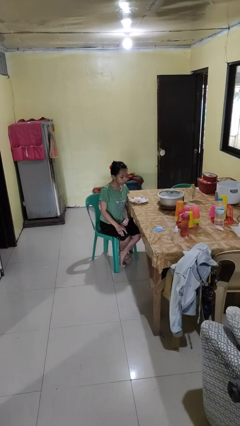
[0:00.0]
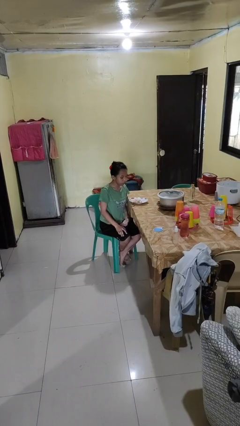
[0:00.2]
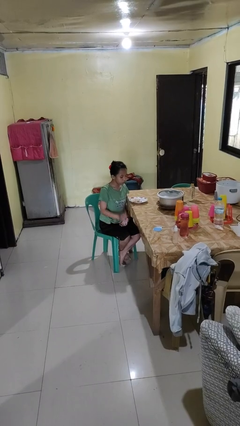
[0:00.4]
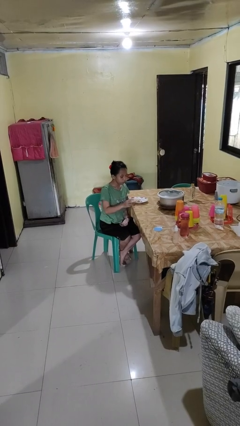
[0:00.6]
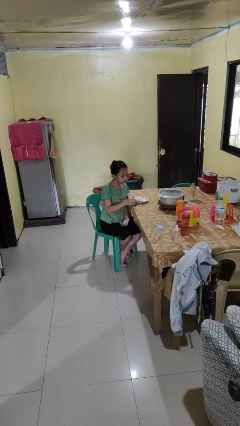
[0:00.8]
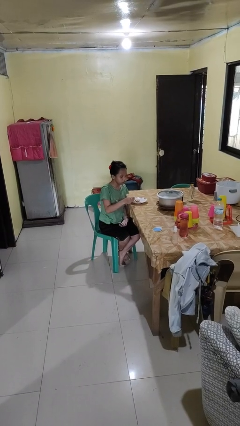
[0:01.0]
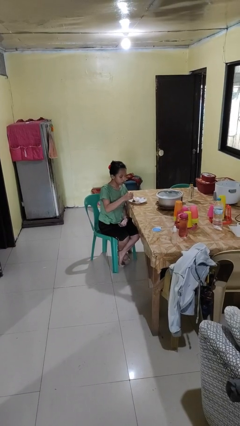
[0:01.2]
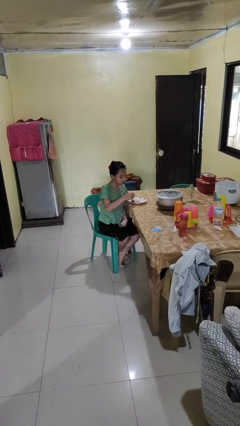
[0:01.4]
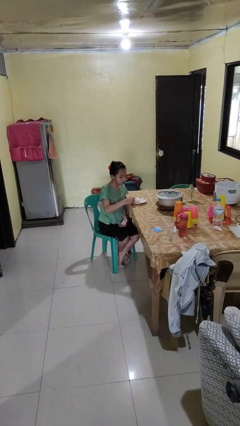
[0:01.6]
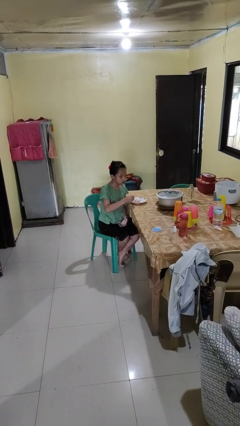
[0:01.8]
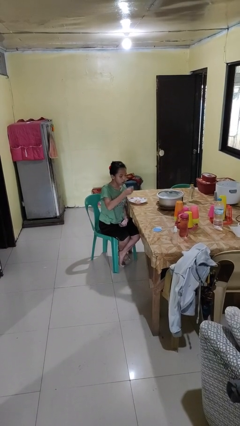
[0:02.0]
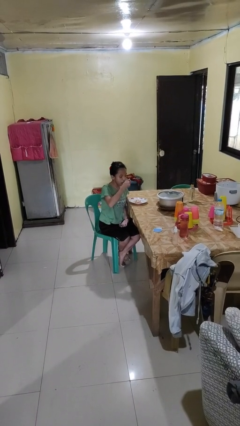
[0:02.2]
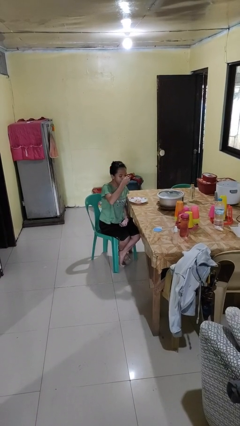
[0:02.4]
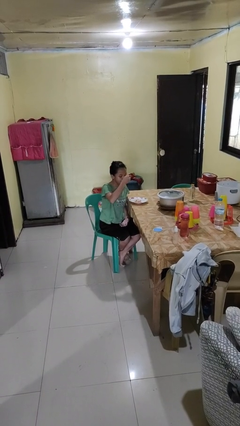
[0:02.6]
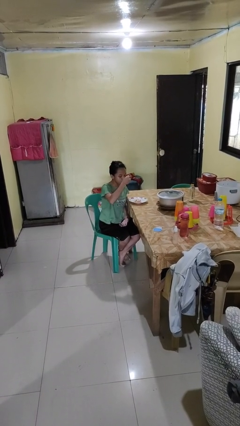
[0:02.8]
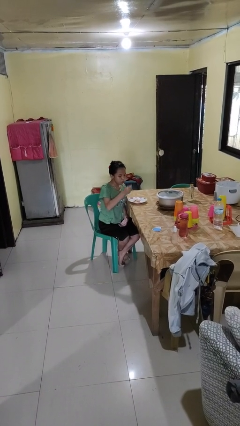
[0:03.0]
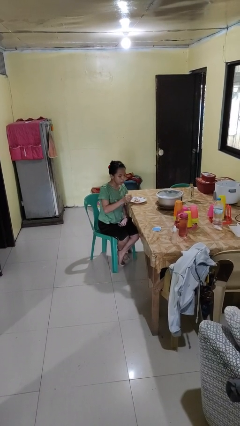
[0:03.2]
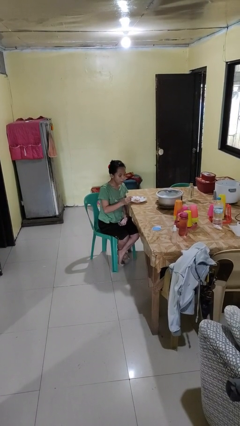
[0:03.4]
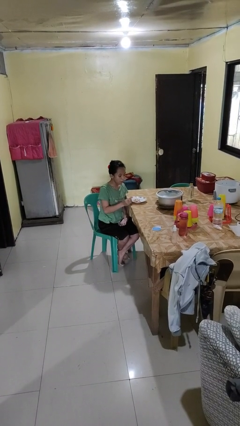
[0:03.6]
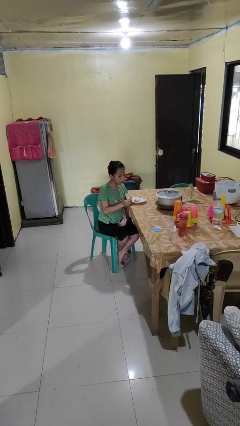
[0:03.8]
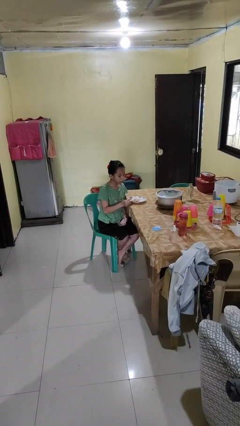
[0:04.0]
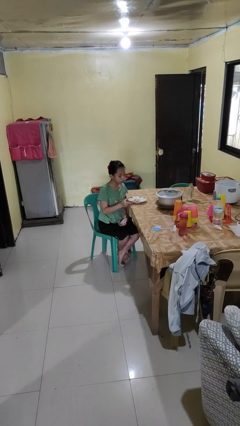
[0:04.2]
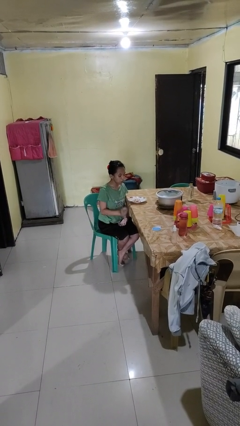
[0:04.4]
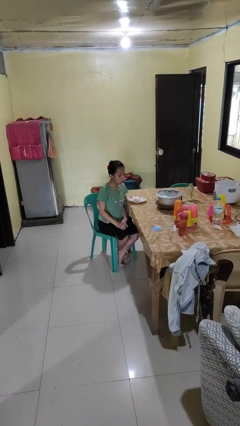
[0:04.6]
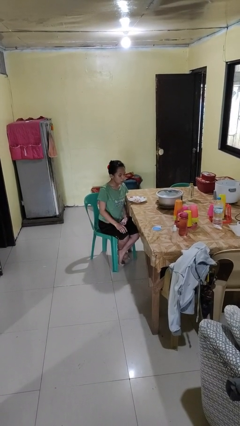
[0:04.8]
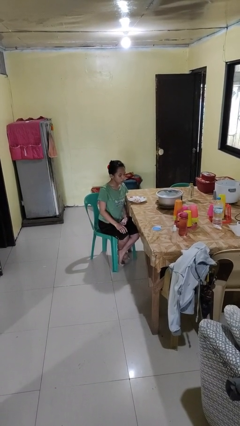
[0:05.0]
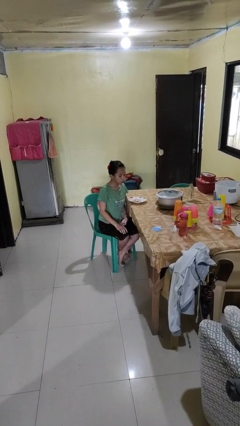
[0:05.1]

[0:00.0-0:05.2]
person eats with utensil

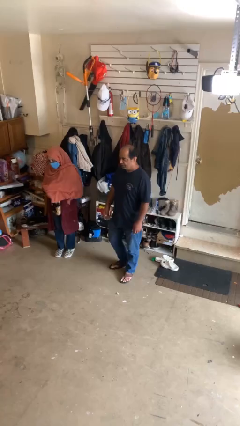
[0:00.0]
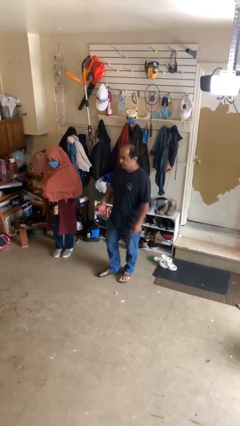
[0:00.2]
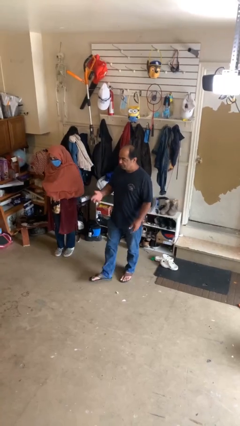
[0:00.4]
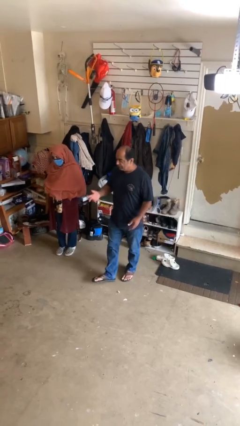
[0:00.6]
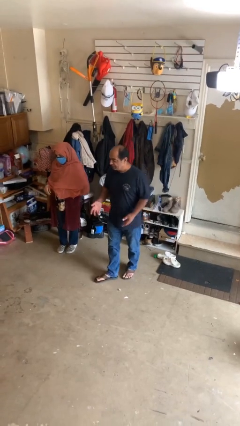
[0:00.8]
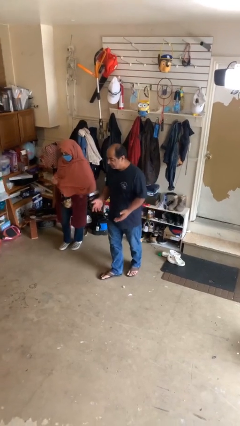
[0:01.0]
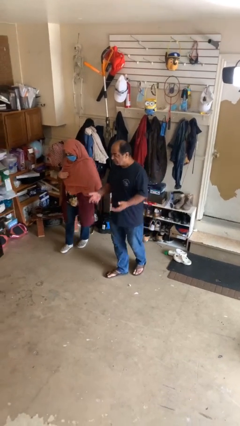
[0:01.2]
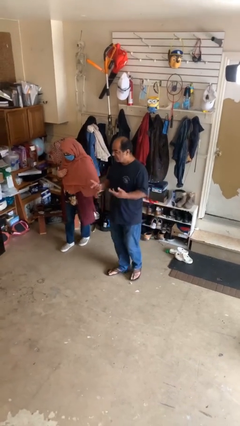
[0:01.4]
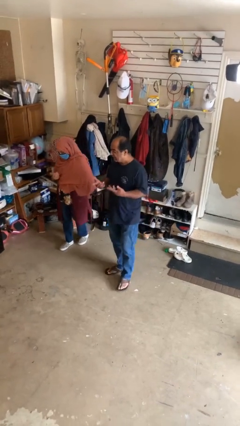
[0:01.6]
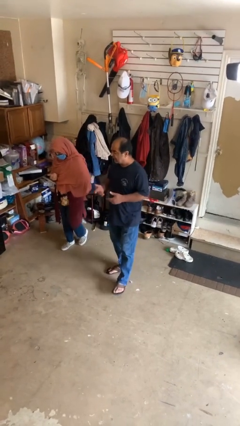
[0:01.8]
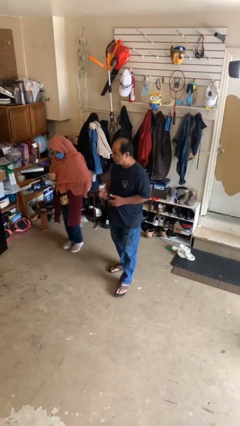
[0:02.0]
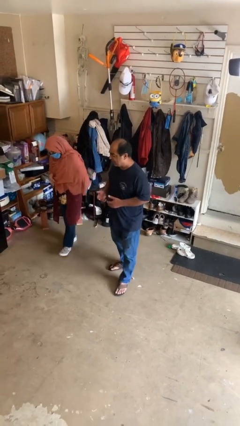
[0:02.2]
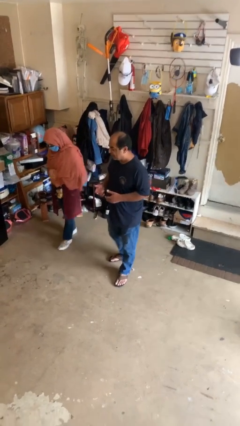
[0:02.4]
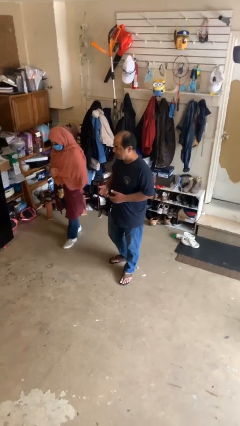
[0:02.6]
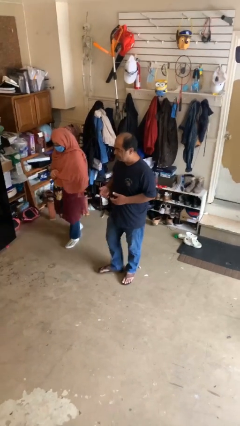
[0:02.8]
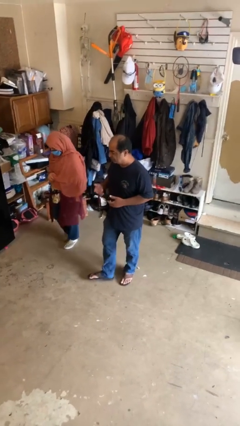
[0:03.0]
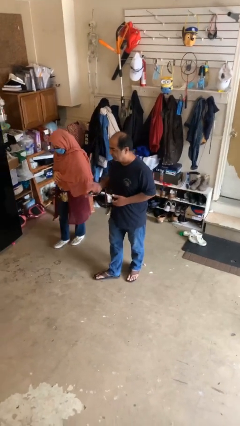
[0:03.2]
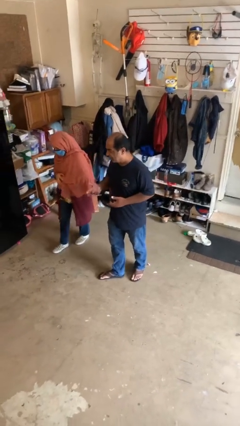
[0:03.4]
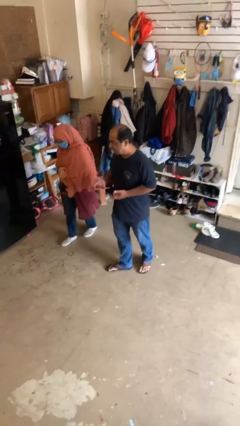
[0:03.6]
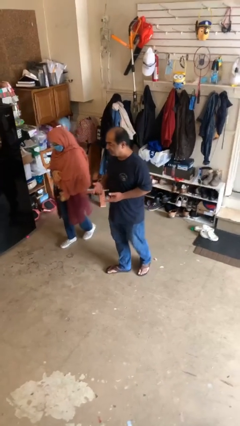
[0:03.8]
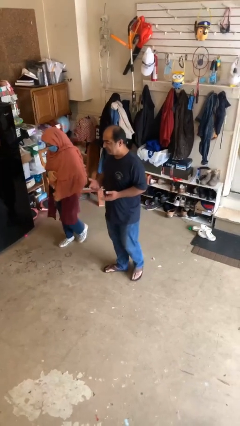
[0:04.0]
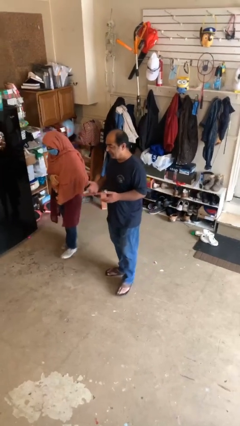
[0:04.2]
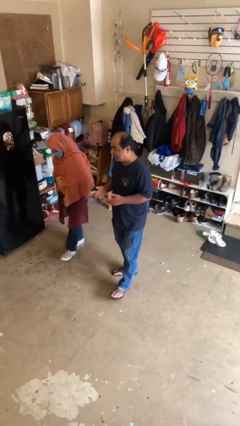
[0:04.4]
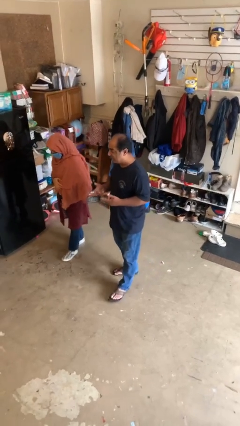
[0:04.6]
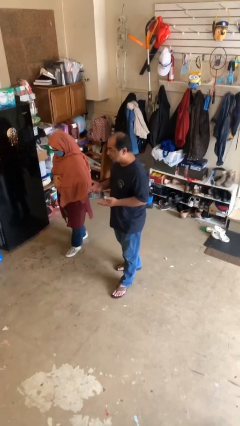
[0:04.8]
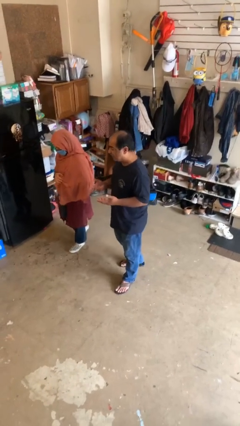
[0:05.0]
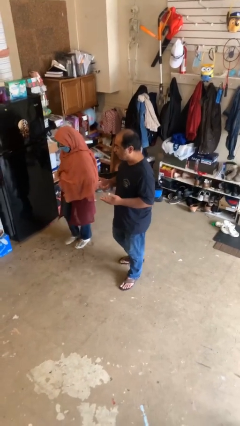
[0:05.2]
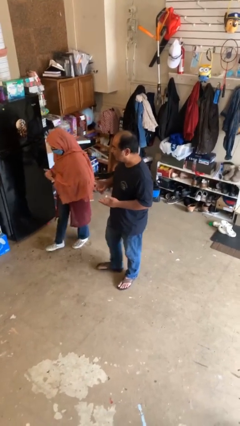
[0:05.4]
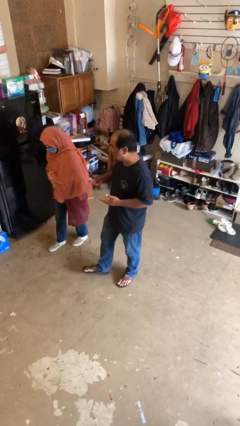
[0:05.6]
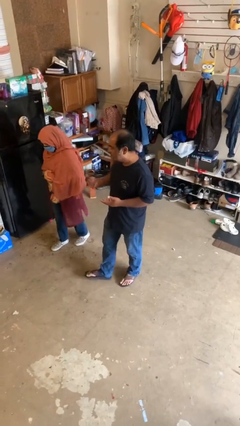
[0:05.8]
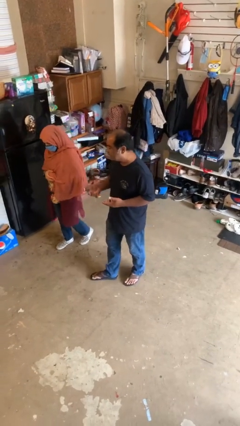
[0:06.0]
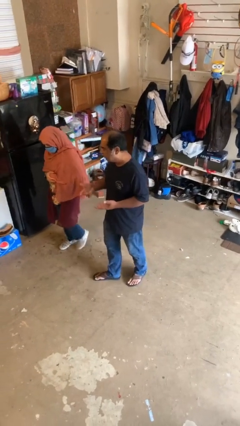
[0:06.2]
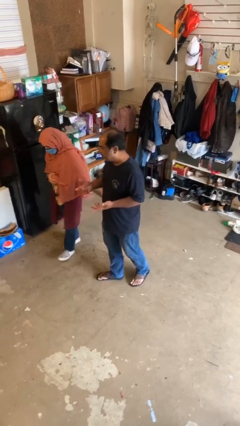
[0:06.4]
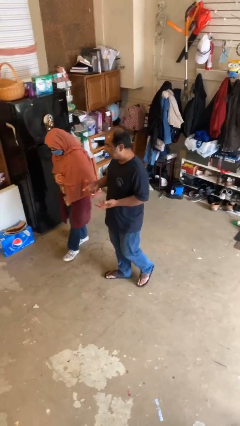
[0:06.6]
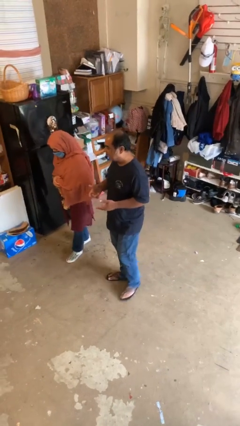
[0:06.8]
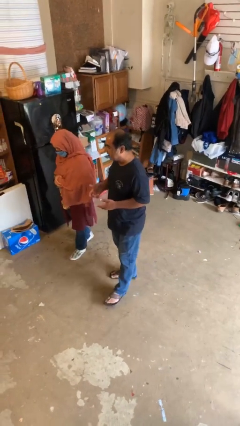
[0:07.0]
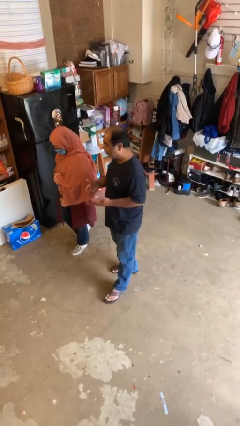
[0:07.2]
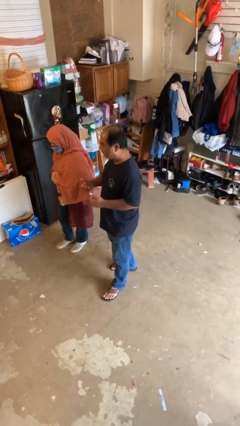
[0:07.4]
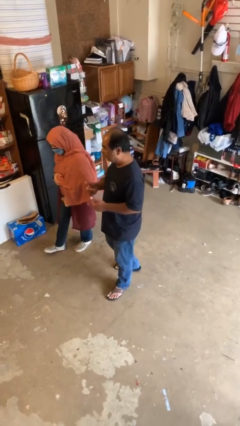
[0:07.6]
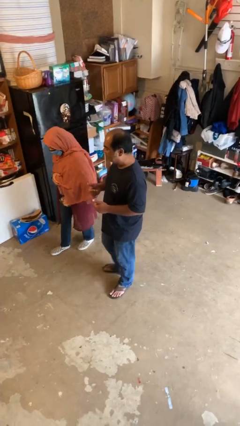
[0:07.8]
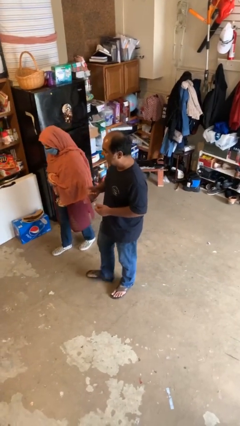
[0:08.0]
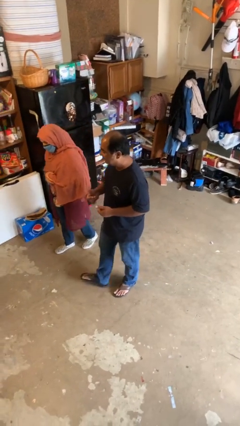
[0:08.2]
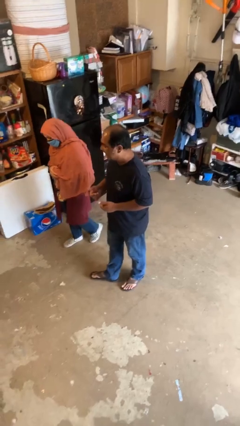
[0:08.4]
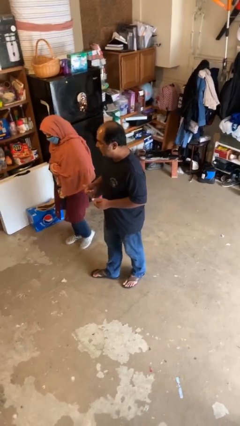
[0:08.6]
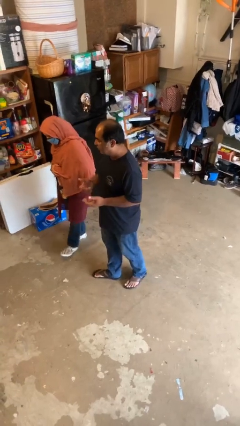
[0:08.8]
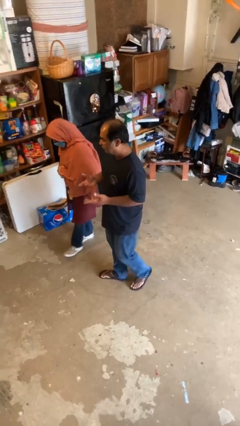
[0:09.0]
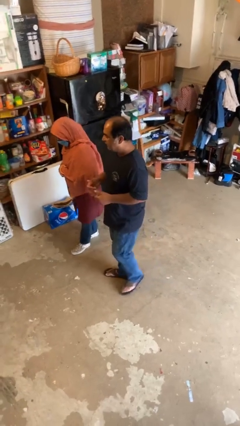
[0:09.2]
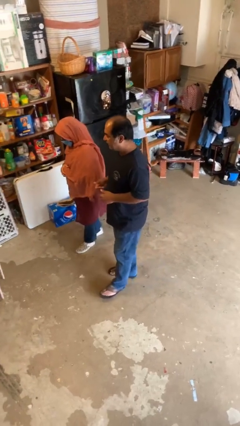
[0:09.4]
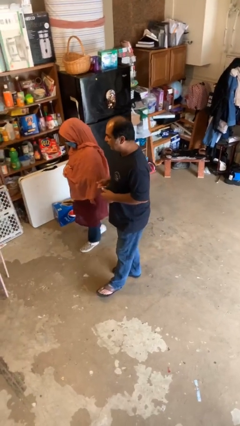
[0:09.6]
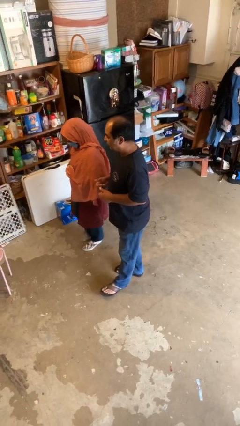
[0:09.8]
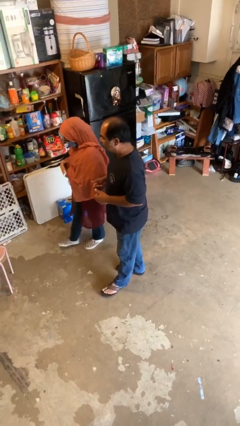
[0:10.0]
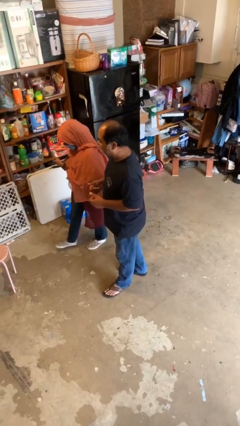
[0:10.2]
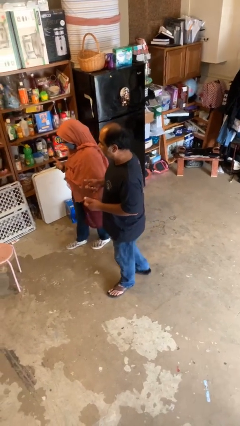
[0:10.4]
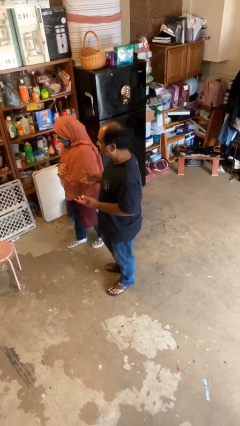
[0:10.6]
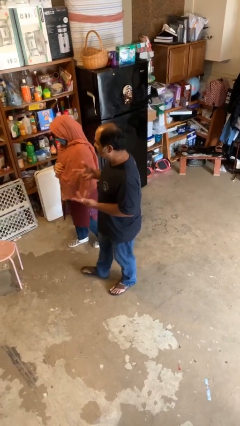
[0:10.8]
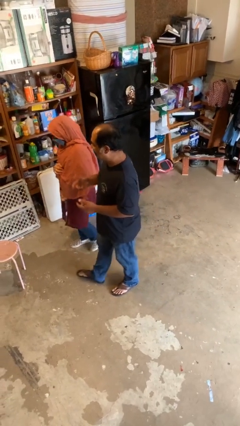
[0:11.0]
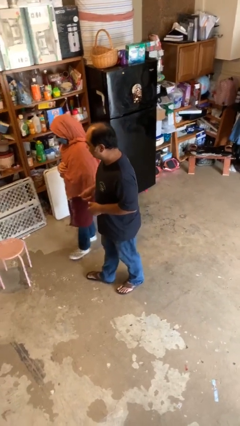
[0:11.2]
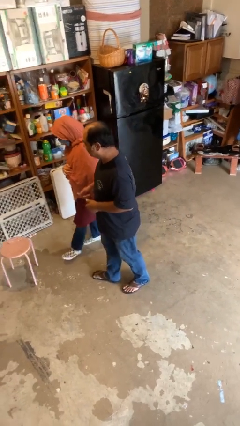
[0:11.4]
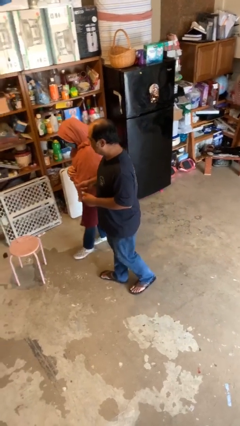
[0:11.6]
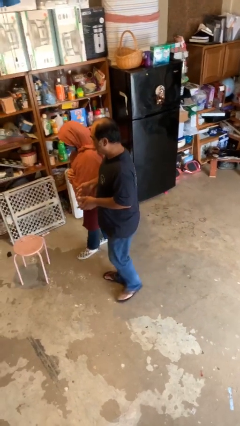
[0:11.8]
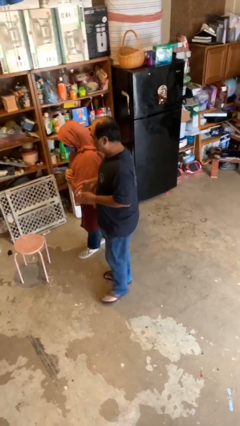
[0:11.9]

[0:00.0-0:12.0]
person talks to person

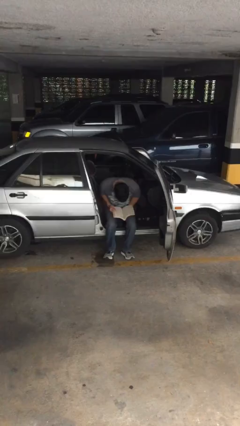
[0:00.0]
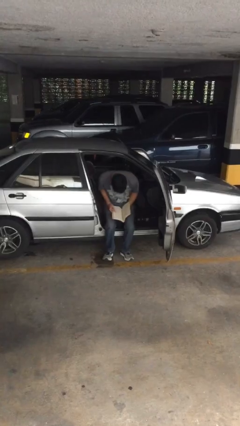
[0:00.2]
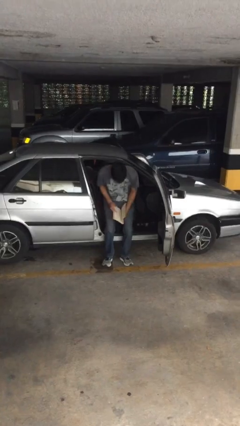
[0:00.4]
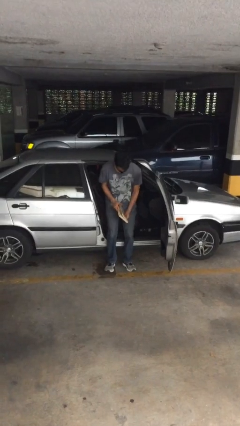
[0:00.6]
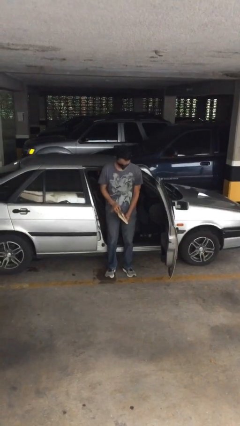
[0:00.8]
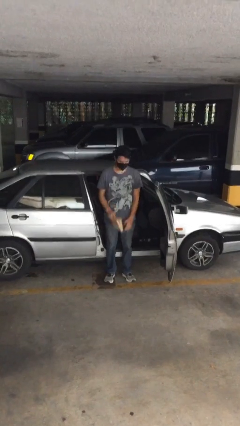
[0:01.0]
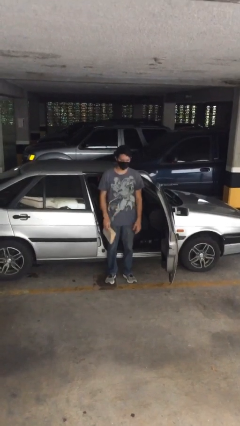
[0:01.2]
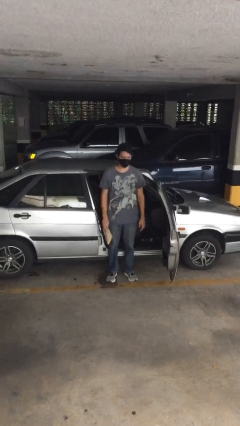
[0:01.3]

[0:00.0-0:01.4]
person stands up
